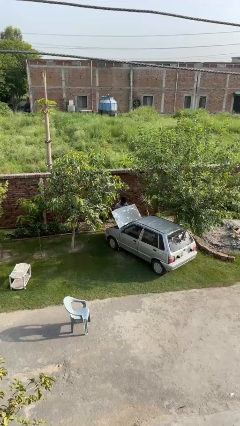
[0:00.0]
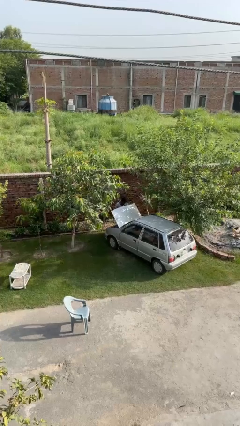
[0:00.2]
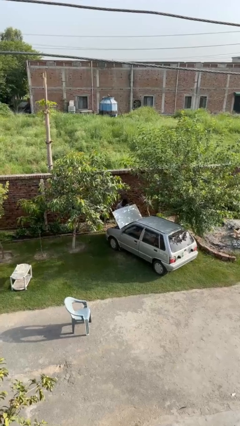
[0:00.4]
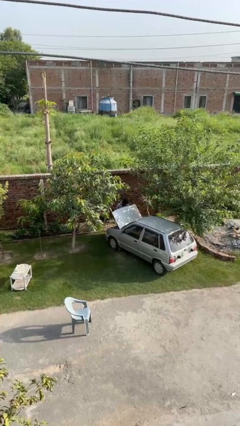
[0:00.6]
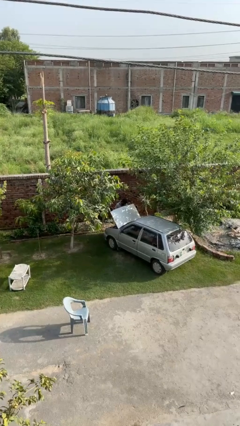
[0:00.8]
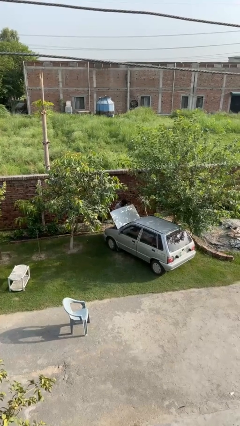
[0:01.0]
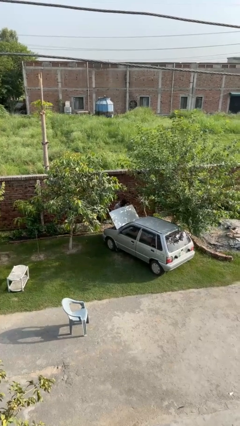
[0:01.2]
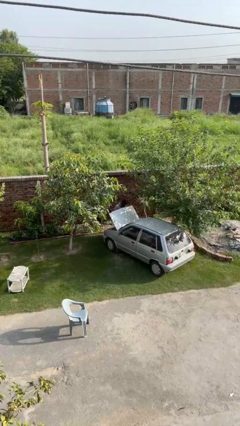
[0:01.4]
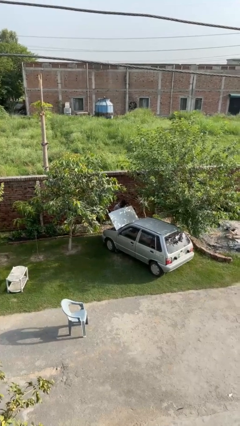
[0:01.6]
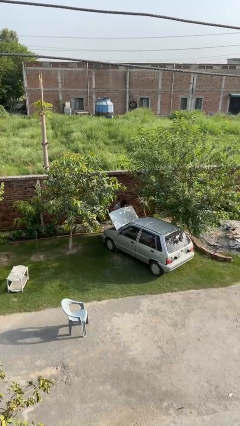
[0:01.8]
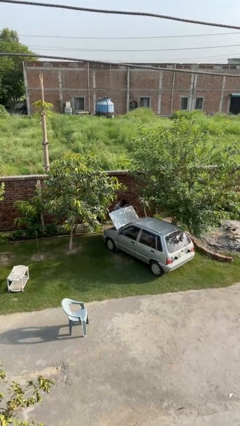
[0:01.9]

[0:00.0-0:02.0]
person opens car hood

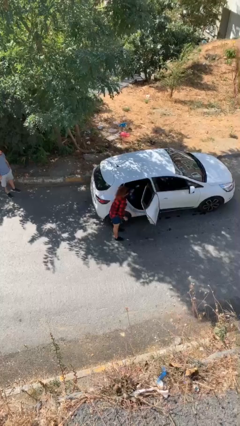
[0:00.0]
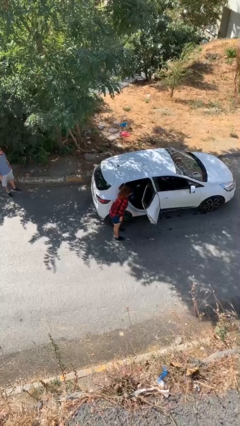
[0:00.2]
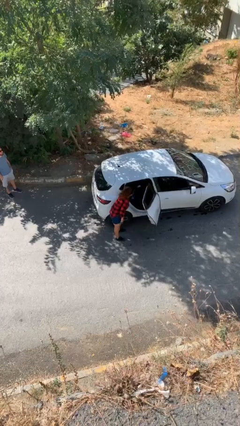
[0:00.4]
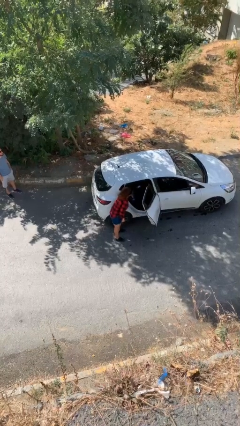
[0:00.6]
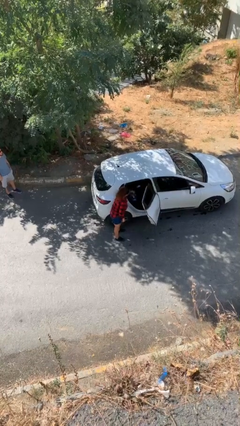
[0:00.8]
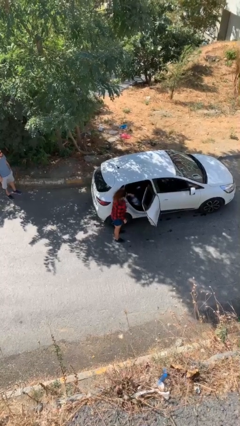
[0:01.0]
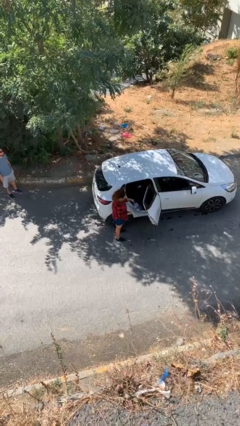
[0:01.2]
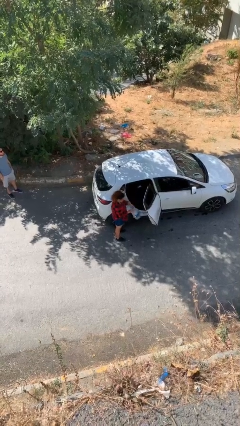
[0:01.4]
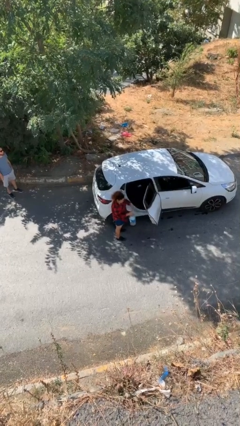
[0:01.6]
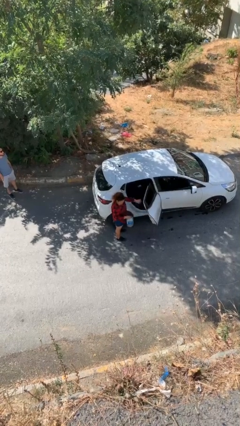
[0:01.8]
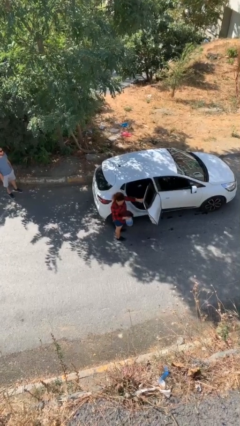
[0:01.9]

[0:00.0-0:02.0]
person unloads car

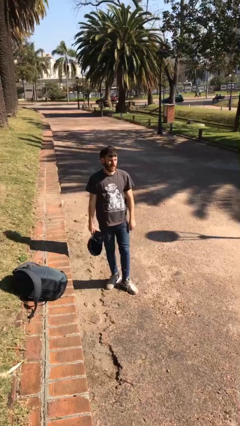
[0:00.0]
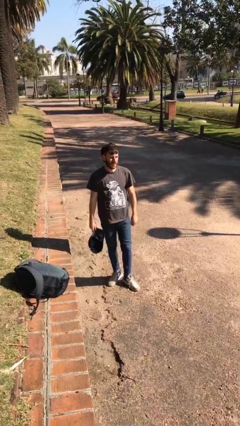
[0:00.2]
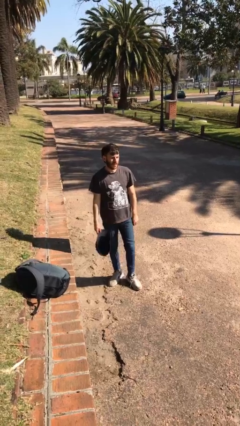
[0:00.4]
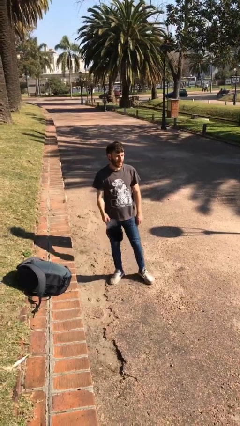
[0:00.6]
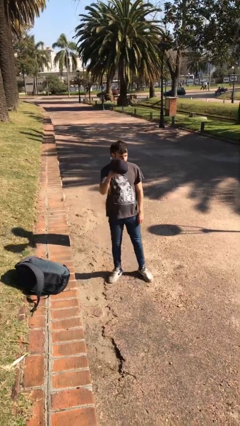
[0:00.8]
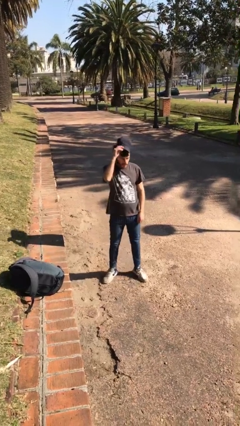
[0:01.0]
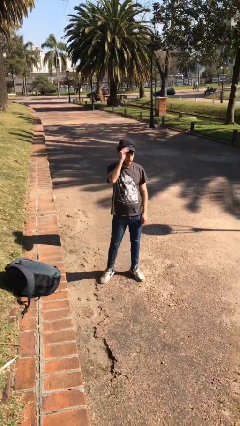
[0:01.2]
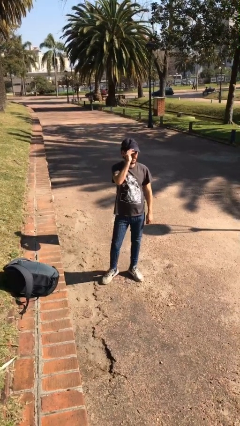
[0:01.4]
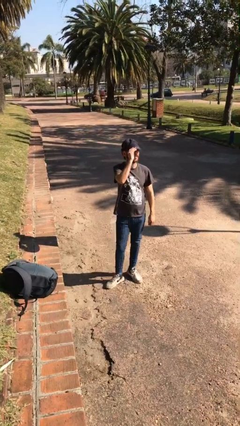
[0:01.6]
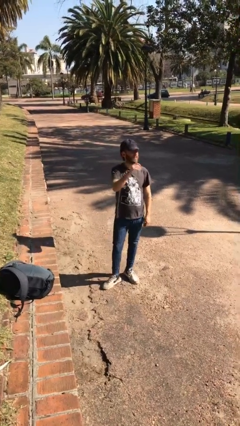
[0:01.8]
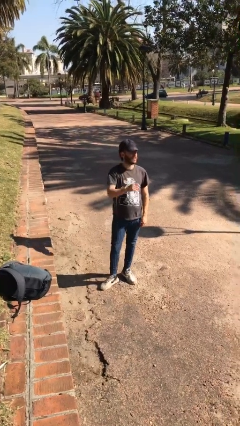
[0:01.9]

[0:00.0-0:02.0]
person puts on hat

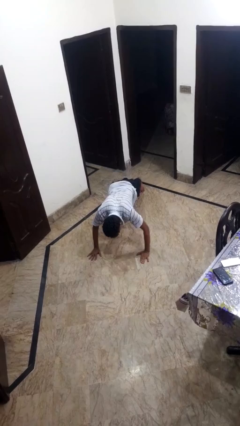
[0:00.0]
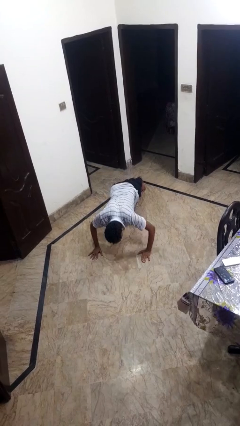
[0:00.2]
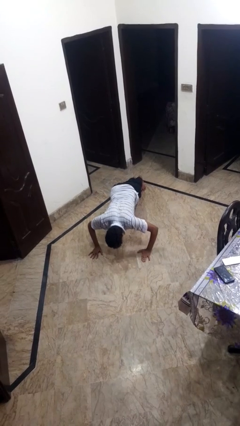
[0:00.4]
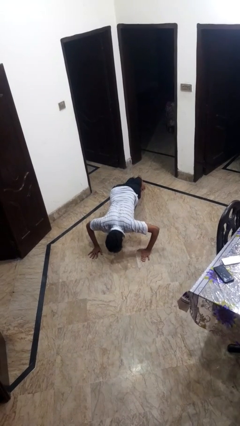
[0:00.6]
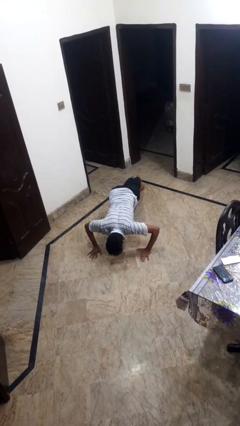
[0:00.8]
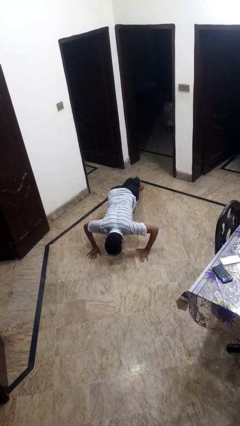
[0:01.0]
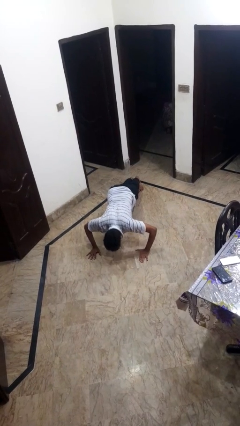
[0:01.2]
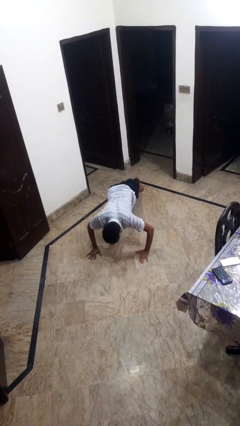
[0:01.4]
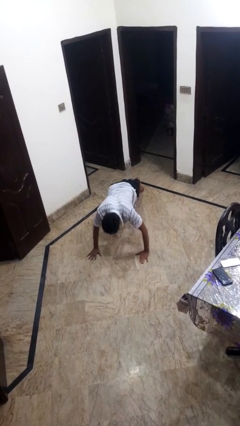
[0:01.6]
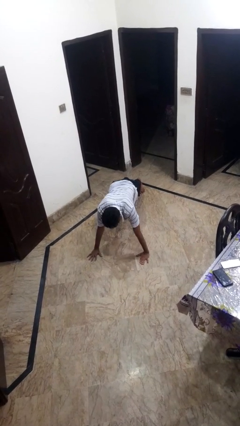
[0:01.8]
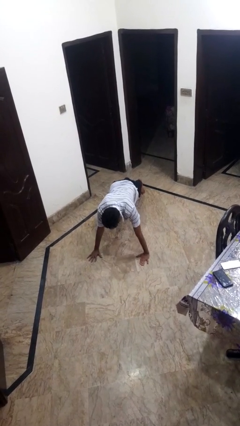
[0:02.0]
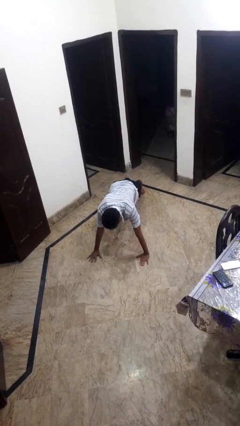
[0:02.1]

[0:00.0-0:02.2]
person exercises with pushup

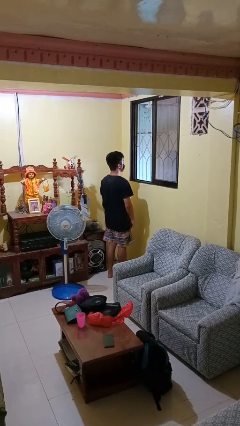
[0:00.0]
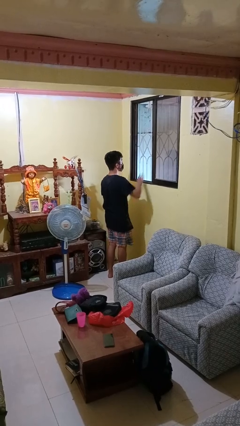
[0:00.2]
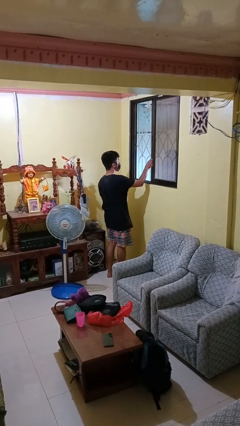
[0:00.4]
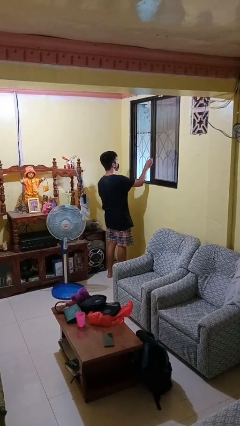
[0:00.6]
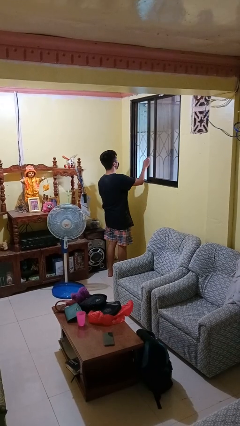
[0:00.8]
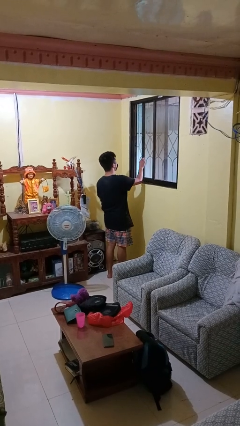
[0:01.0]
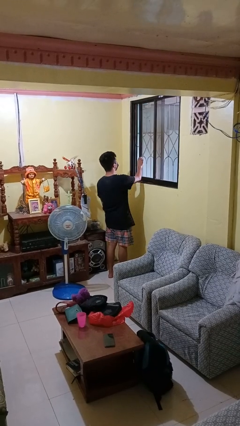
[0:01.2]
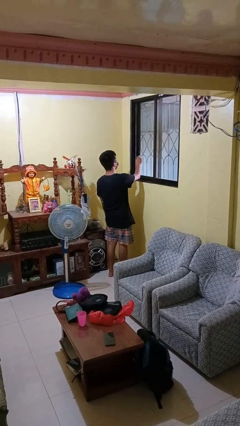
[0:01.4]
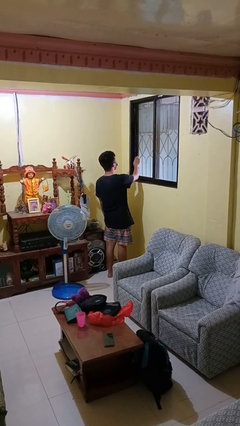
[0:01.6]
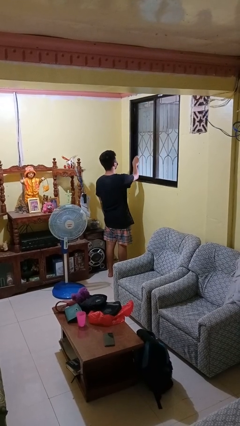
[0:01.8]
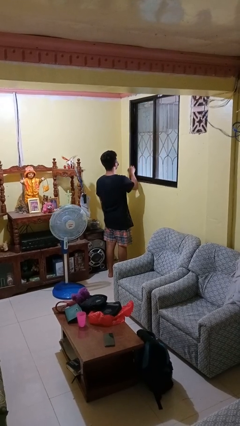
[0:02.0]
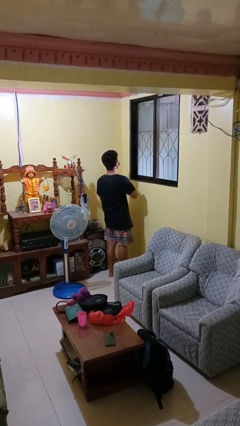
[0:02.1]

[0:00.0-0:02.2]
person closes home window

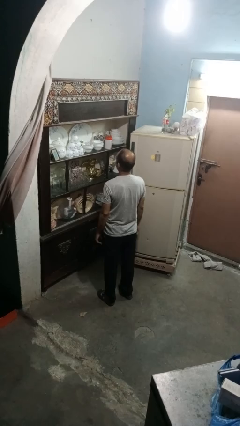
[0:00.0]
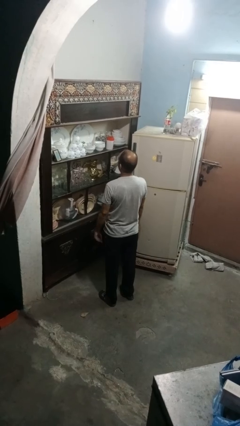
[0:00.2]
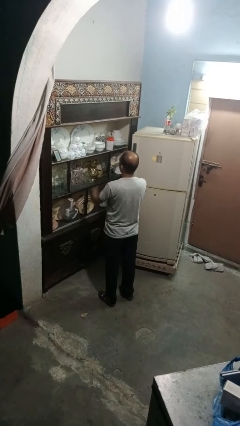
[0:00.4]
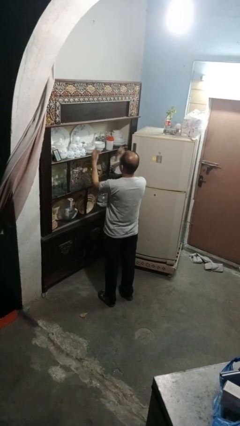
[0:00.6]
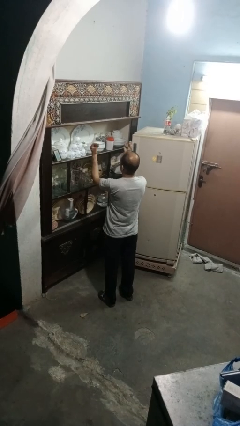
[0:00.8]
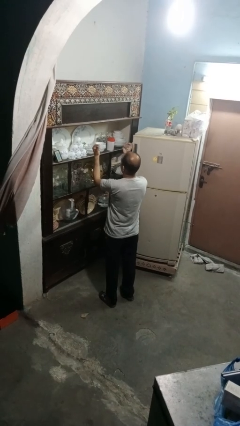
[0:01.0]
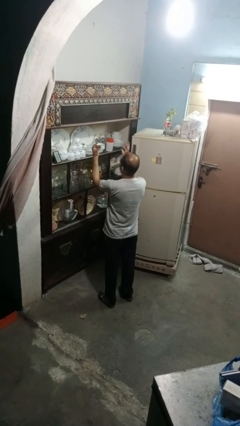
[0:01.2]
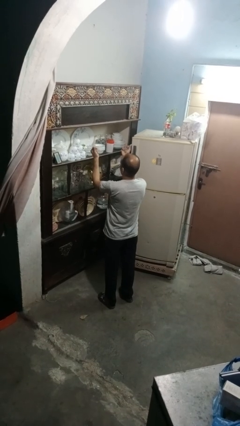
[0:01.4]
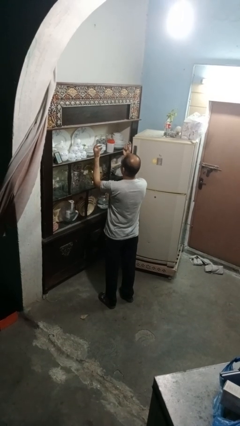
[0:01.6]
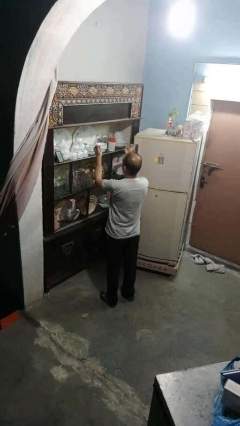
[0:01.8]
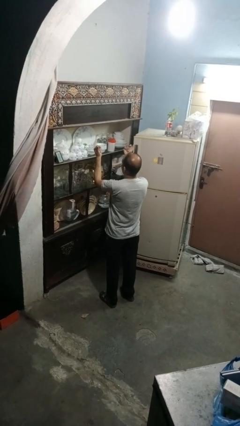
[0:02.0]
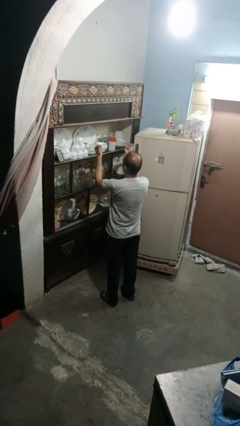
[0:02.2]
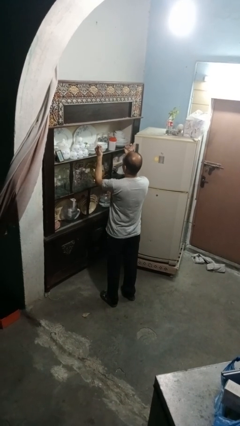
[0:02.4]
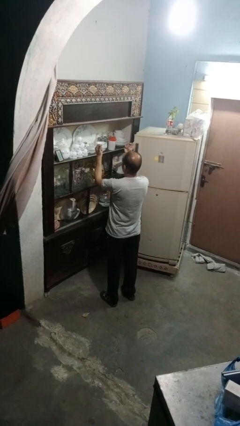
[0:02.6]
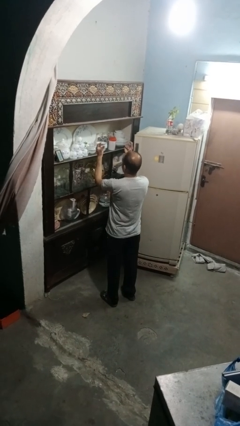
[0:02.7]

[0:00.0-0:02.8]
person snaps fingers

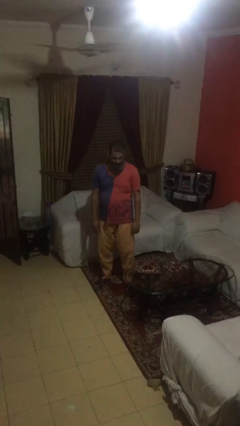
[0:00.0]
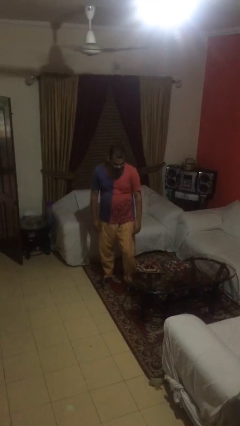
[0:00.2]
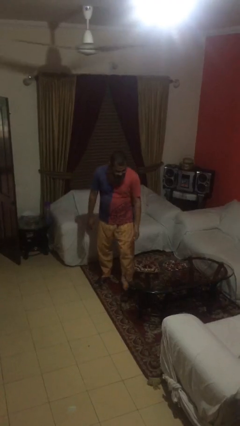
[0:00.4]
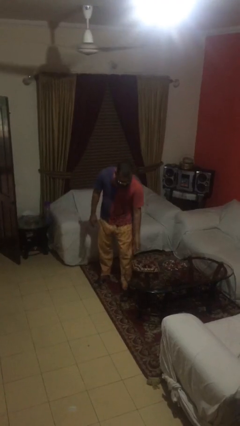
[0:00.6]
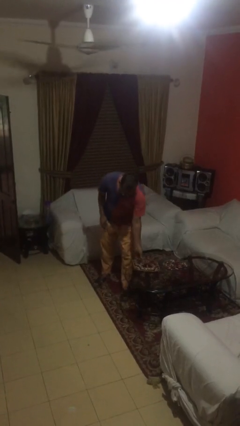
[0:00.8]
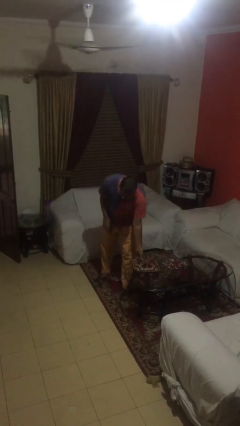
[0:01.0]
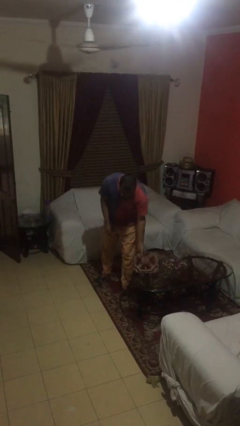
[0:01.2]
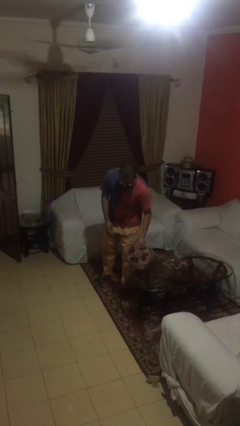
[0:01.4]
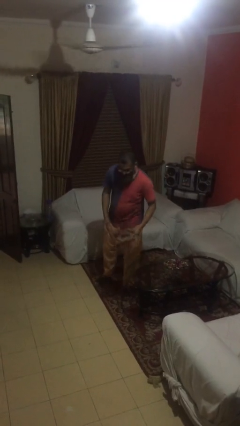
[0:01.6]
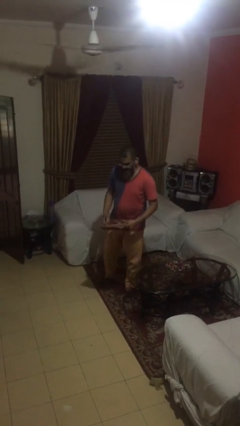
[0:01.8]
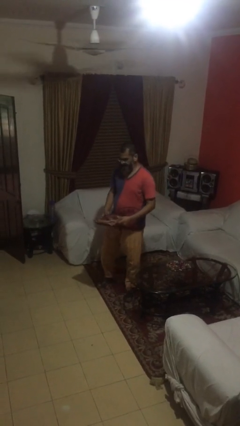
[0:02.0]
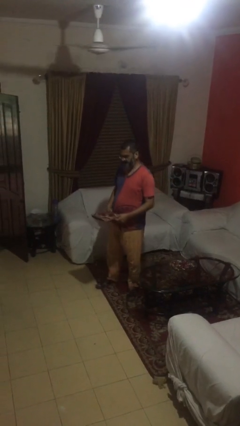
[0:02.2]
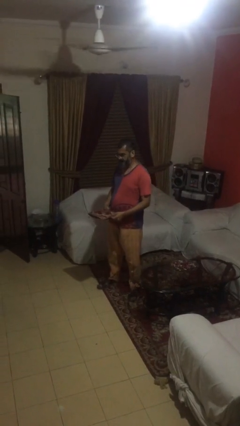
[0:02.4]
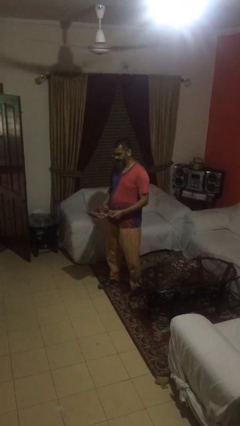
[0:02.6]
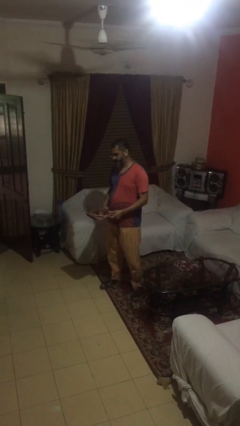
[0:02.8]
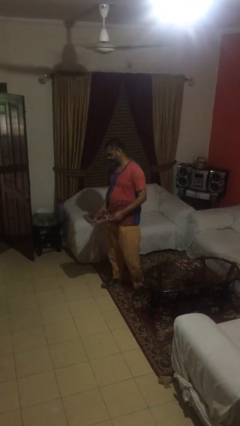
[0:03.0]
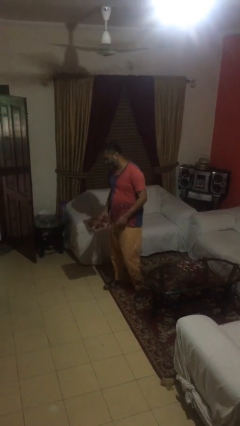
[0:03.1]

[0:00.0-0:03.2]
person picks up object from table

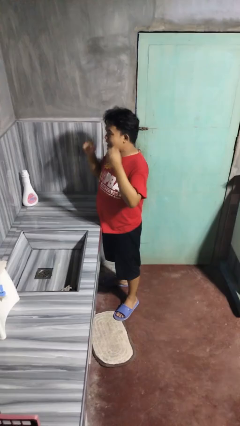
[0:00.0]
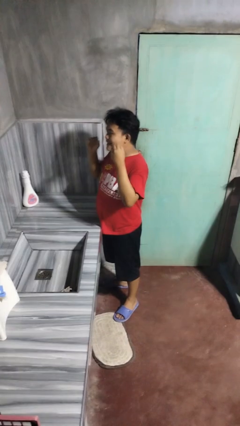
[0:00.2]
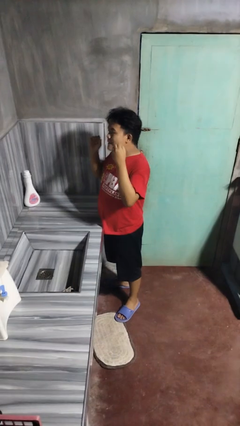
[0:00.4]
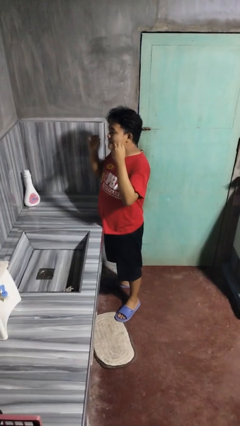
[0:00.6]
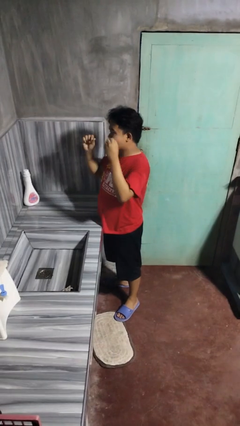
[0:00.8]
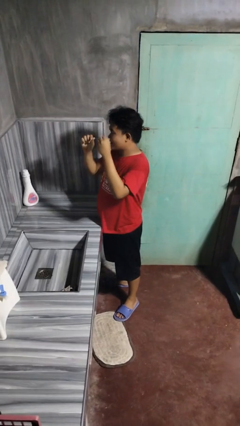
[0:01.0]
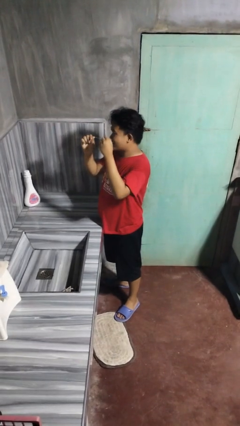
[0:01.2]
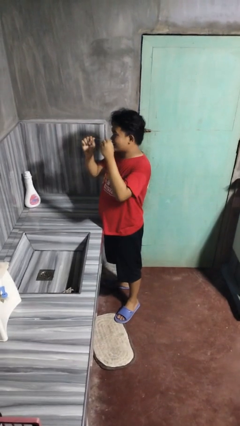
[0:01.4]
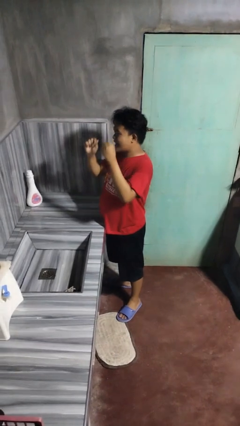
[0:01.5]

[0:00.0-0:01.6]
person flosses
